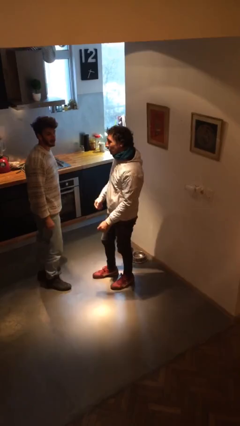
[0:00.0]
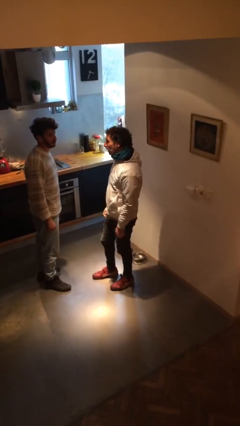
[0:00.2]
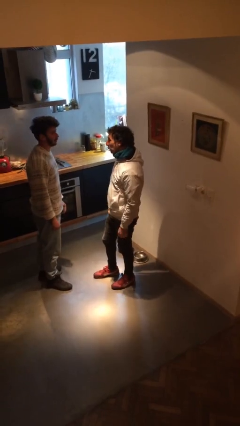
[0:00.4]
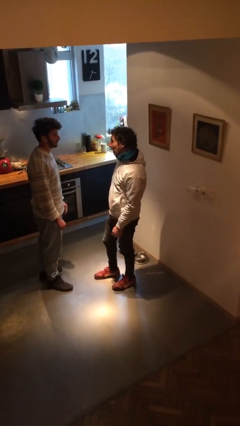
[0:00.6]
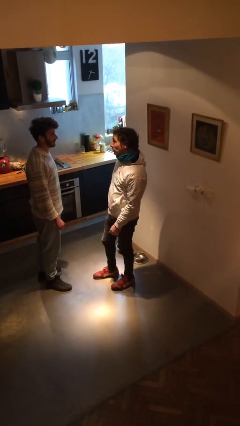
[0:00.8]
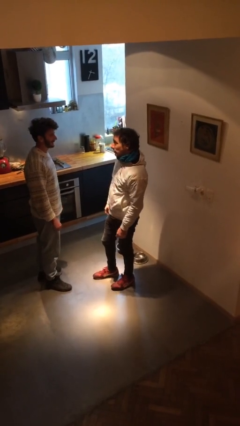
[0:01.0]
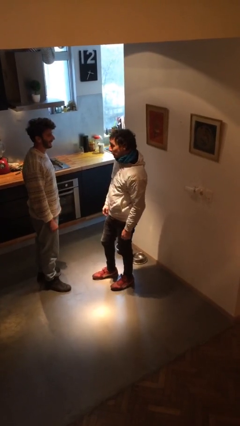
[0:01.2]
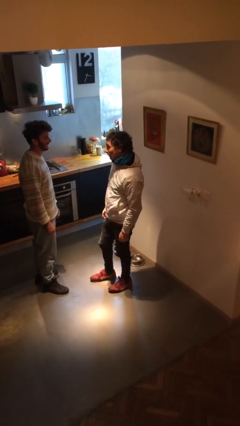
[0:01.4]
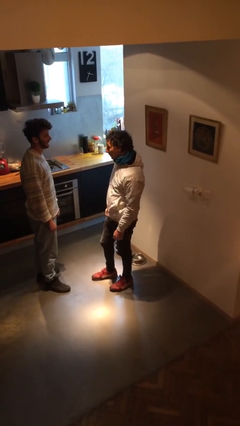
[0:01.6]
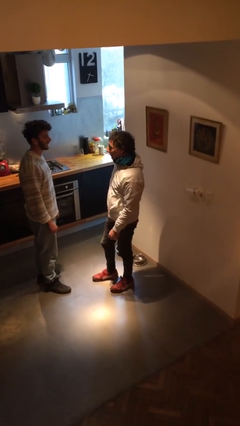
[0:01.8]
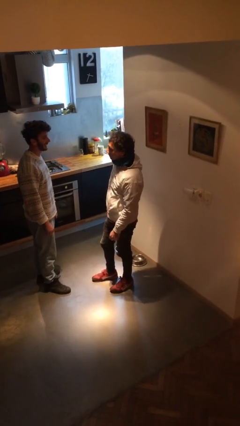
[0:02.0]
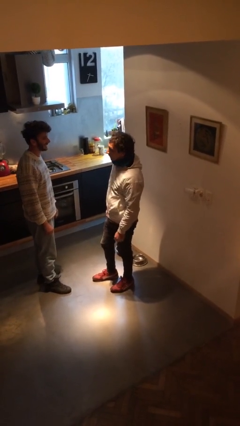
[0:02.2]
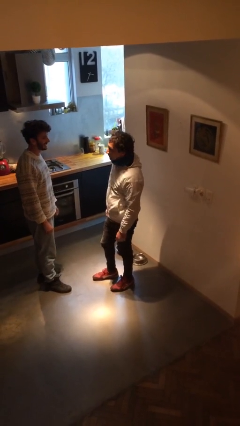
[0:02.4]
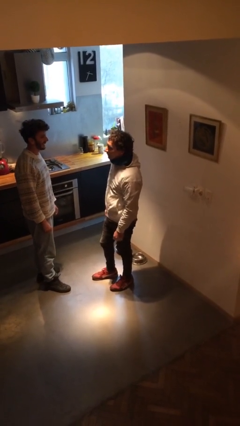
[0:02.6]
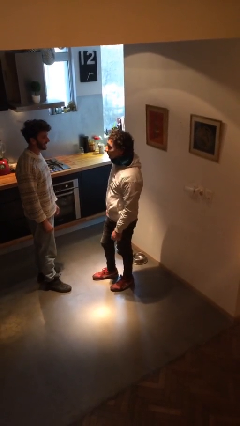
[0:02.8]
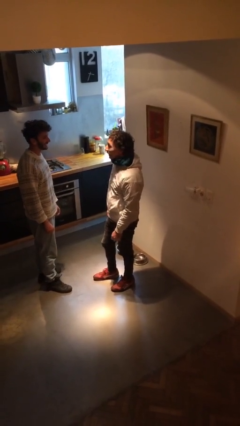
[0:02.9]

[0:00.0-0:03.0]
person talks to person

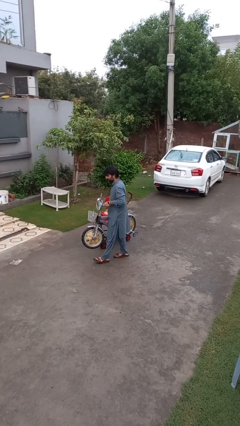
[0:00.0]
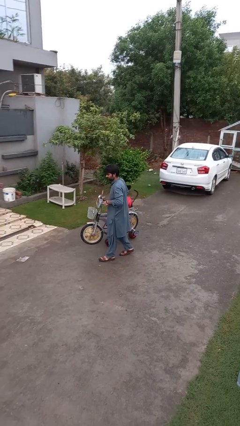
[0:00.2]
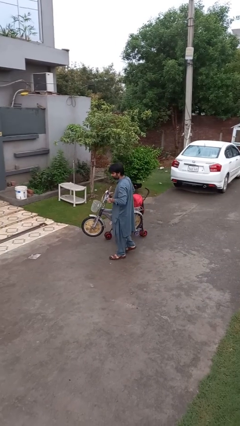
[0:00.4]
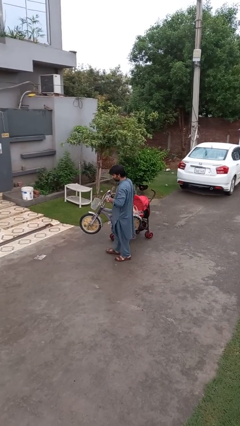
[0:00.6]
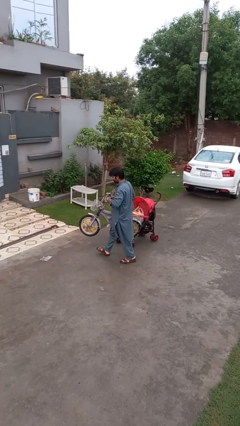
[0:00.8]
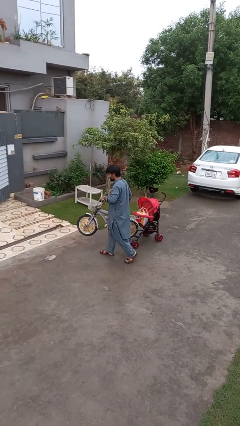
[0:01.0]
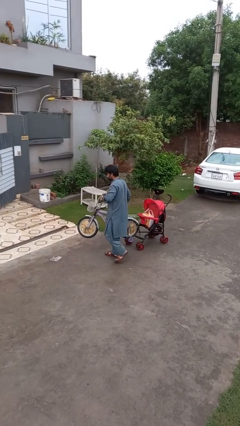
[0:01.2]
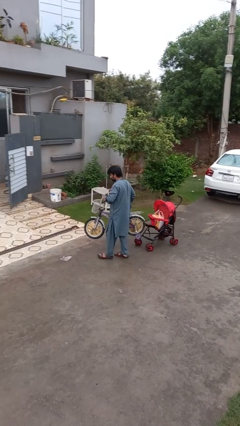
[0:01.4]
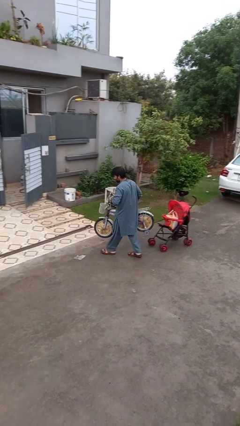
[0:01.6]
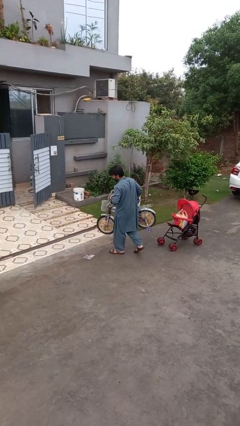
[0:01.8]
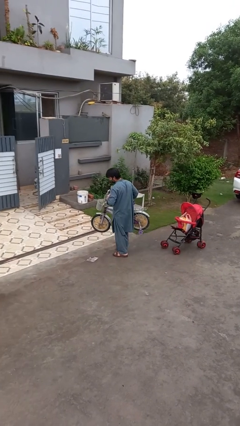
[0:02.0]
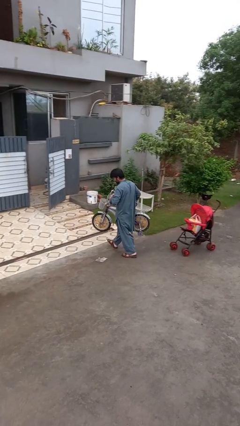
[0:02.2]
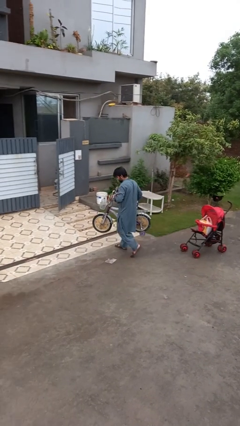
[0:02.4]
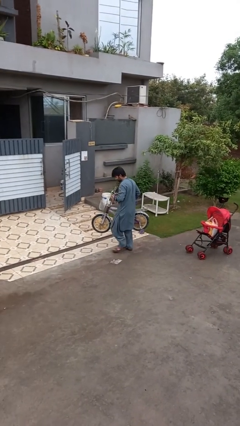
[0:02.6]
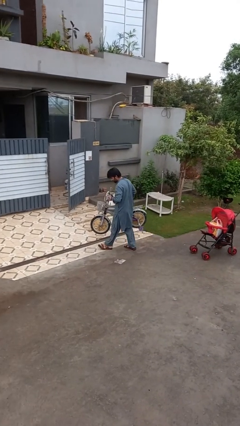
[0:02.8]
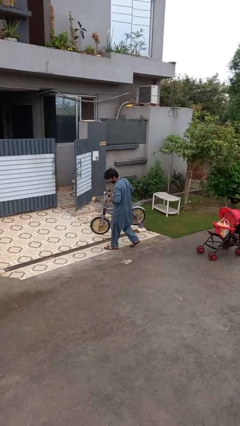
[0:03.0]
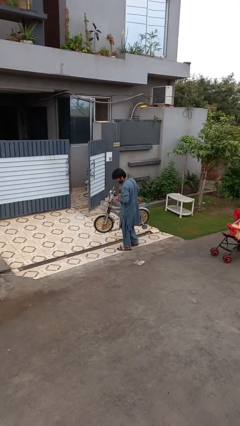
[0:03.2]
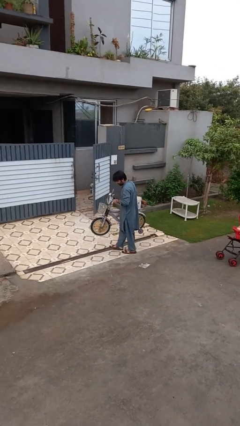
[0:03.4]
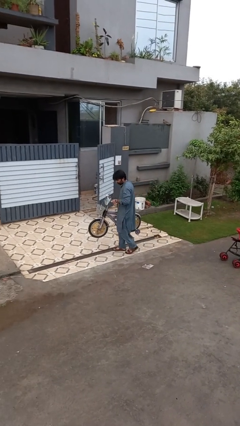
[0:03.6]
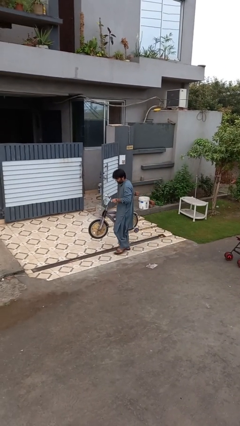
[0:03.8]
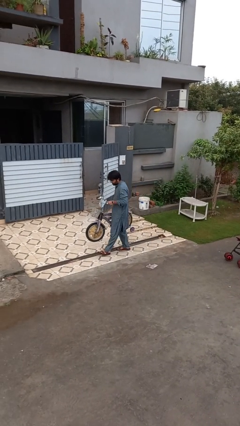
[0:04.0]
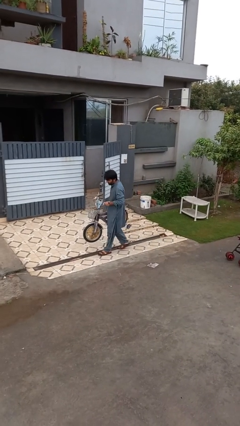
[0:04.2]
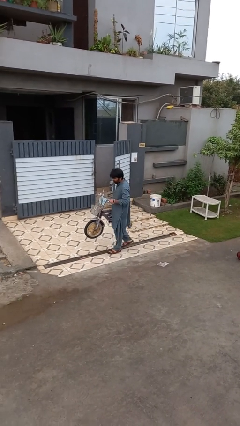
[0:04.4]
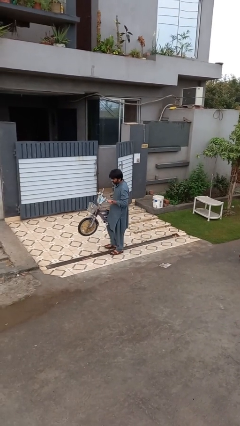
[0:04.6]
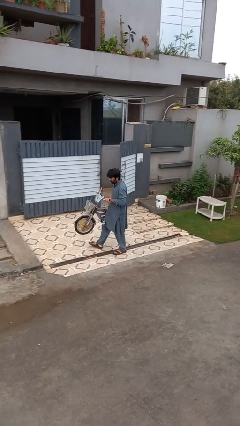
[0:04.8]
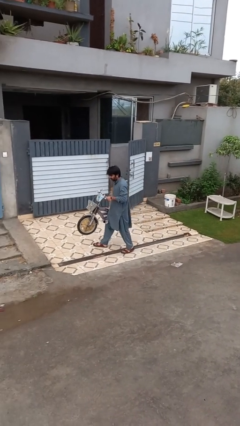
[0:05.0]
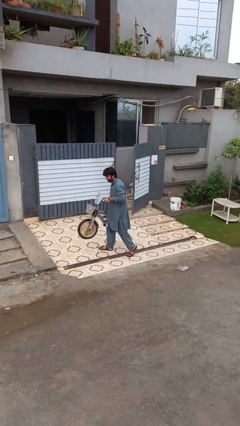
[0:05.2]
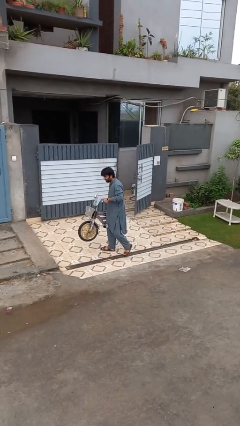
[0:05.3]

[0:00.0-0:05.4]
person carries bicycle

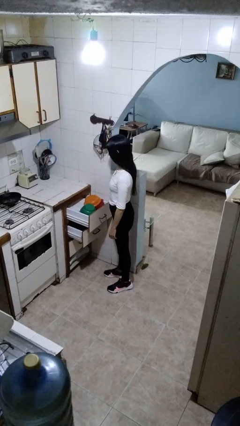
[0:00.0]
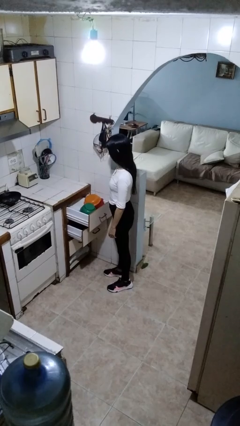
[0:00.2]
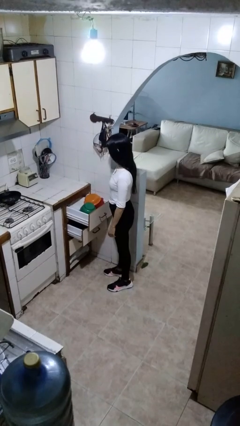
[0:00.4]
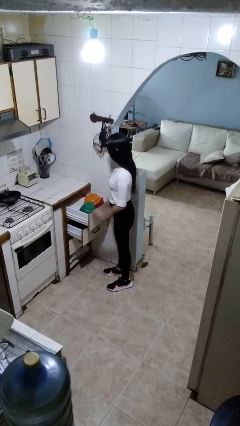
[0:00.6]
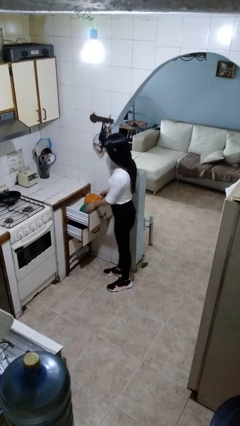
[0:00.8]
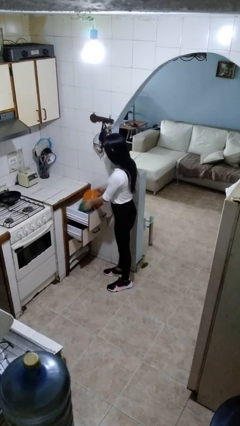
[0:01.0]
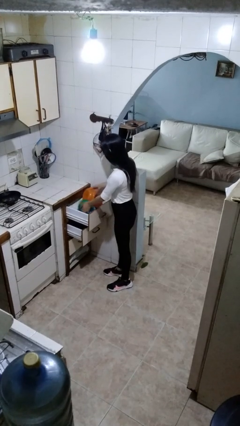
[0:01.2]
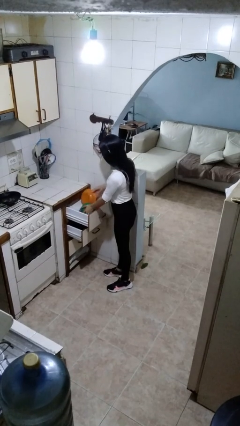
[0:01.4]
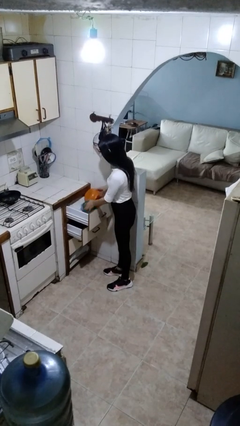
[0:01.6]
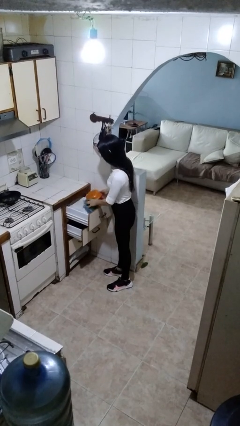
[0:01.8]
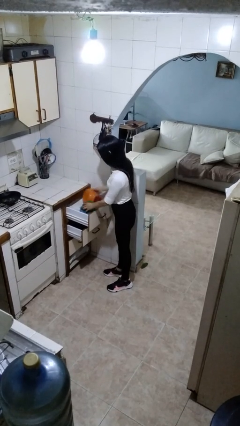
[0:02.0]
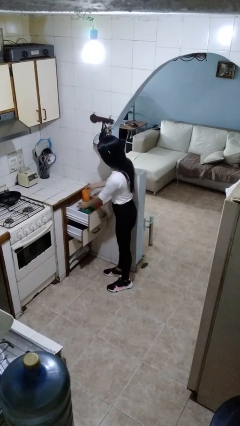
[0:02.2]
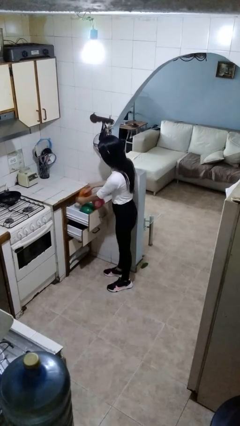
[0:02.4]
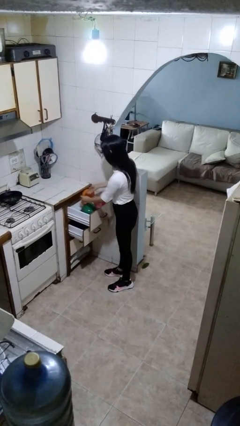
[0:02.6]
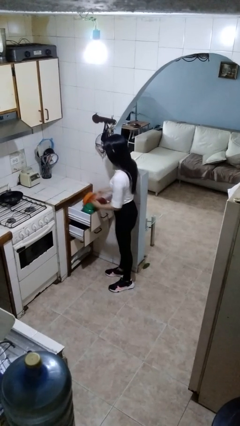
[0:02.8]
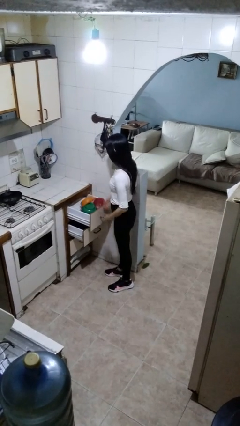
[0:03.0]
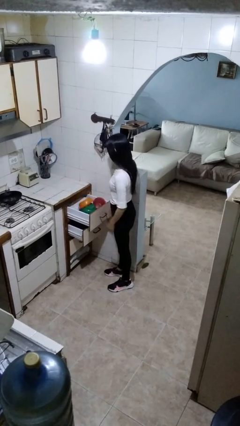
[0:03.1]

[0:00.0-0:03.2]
person searches in kitchen drawer

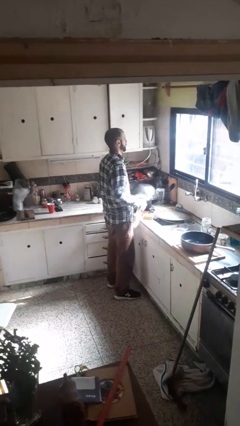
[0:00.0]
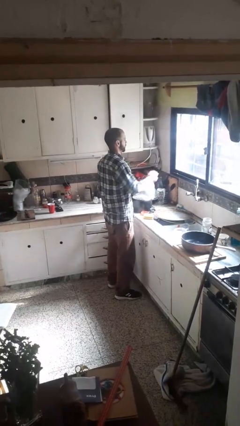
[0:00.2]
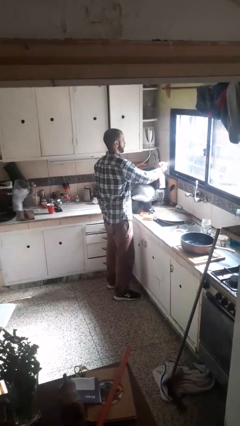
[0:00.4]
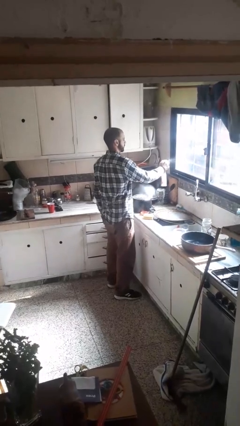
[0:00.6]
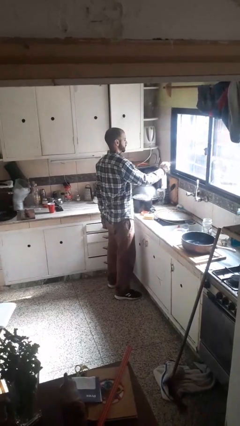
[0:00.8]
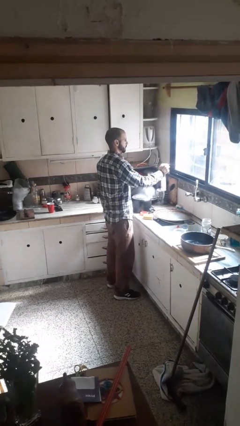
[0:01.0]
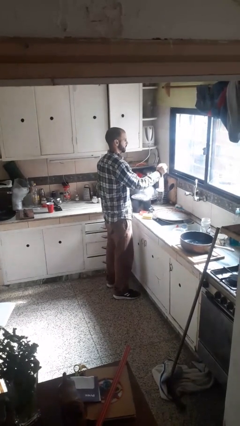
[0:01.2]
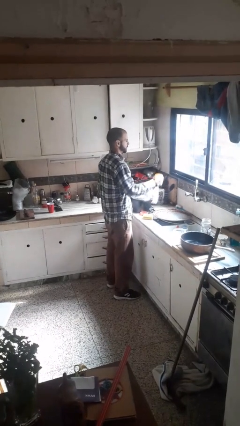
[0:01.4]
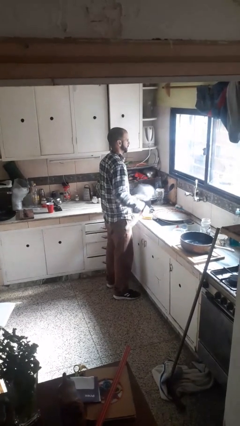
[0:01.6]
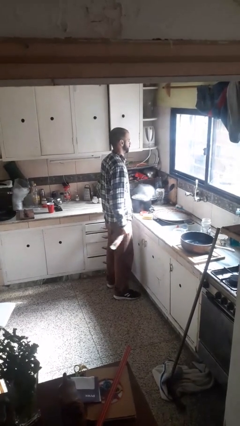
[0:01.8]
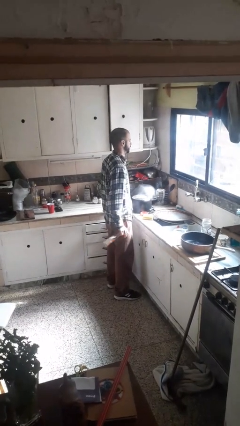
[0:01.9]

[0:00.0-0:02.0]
person sprays from bottle

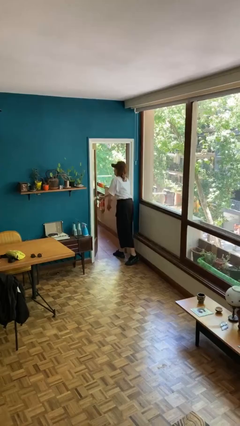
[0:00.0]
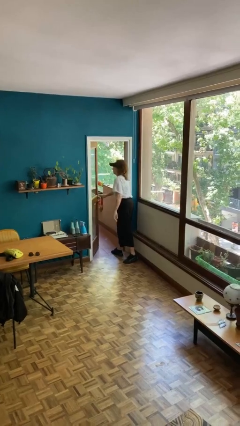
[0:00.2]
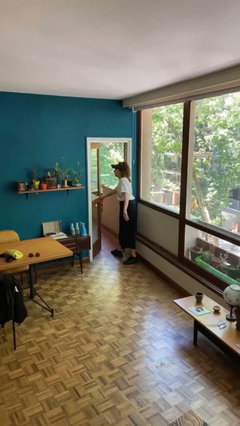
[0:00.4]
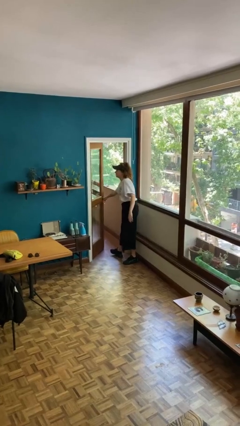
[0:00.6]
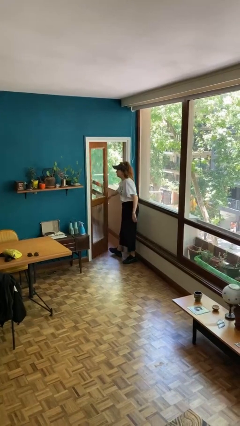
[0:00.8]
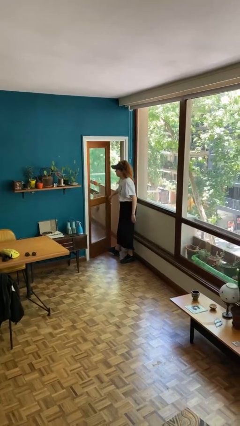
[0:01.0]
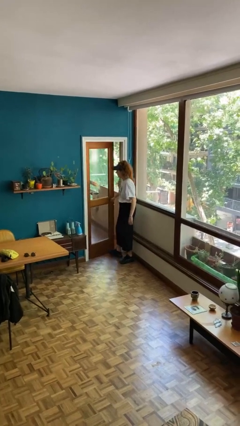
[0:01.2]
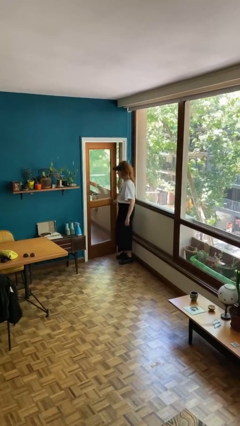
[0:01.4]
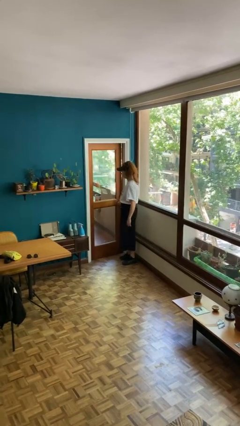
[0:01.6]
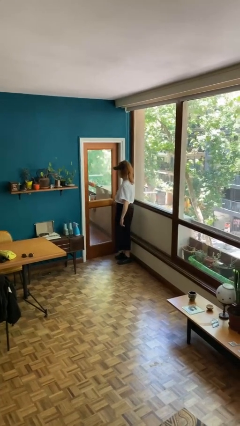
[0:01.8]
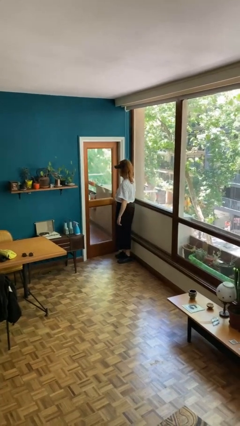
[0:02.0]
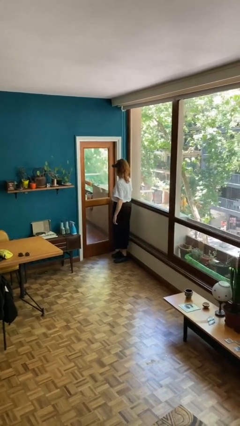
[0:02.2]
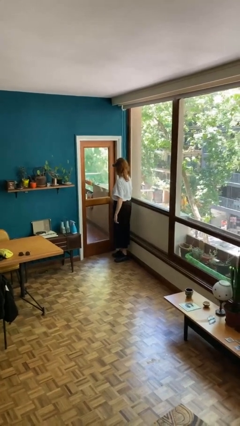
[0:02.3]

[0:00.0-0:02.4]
person closes facility door

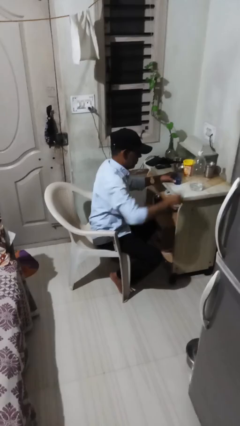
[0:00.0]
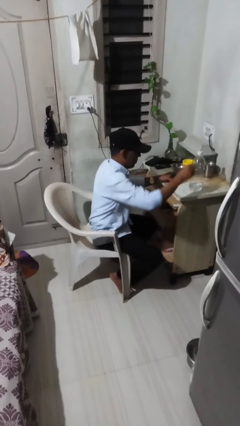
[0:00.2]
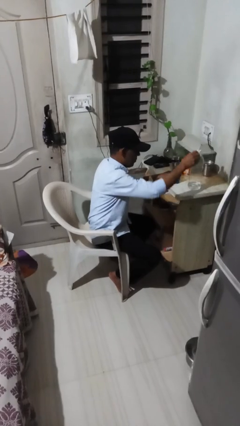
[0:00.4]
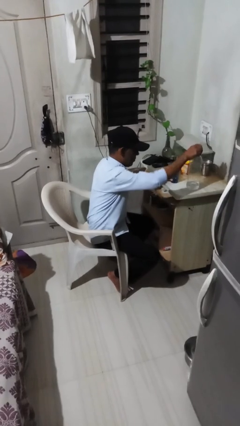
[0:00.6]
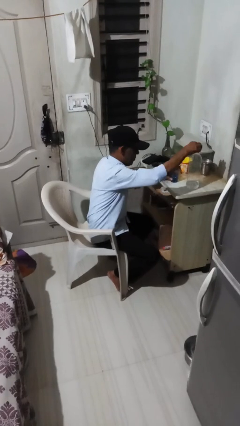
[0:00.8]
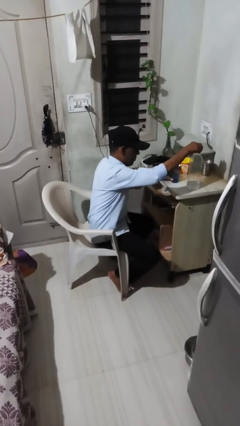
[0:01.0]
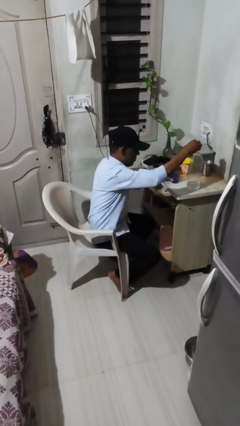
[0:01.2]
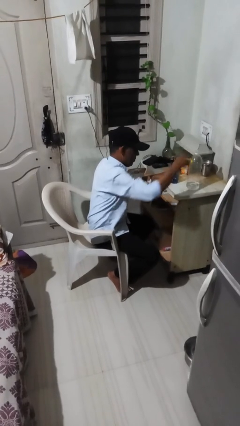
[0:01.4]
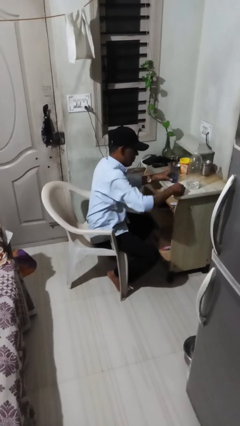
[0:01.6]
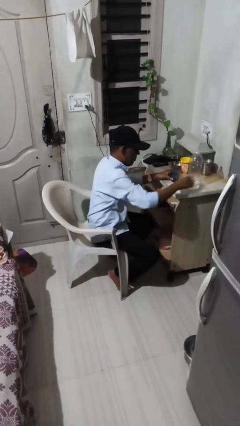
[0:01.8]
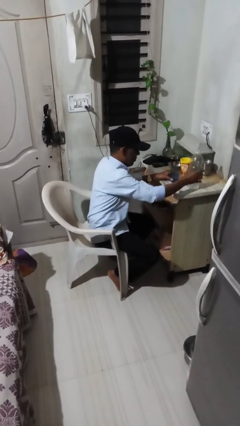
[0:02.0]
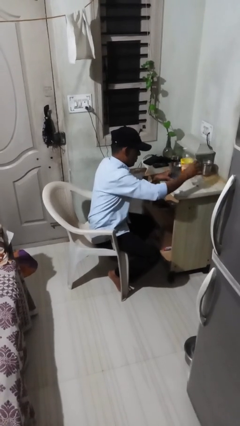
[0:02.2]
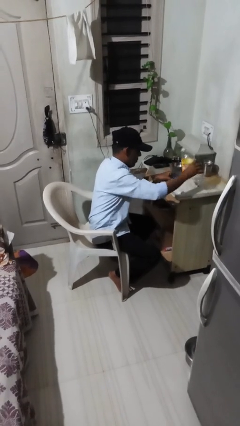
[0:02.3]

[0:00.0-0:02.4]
person unscrews lid from bottle
